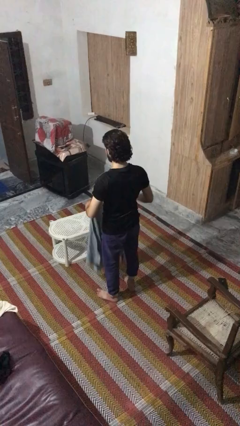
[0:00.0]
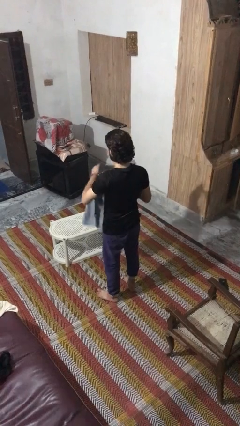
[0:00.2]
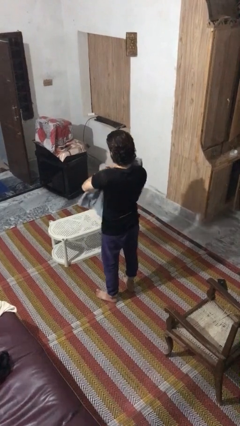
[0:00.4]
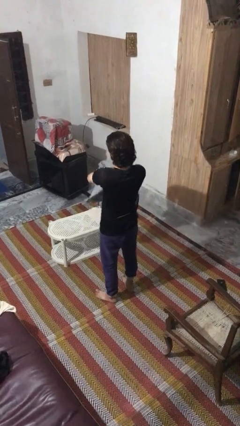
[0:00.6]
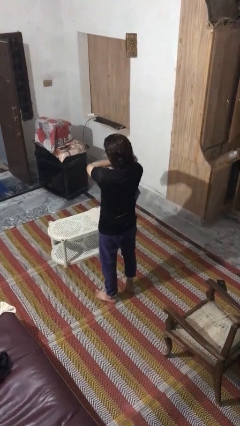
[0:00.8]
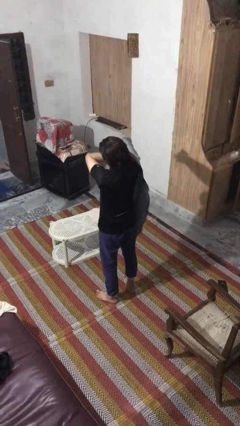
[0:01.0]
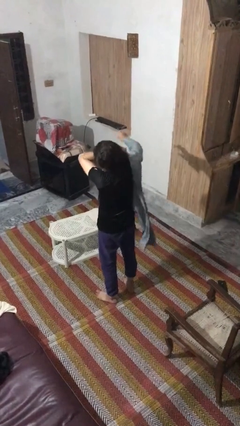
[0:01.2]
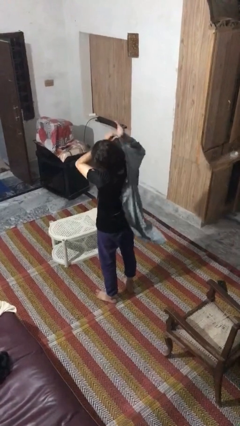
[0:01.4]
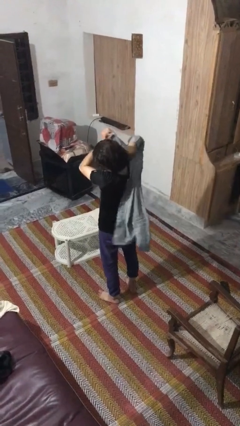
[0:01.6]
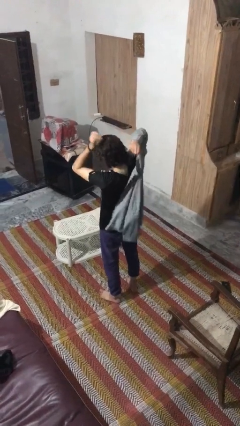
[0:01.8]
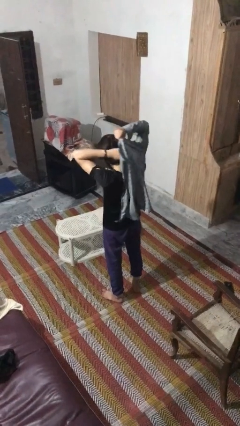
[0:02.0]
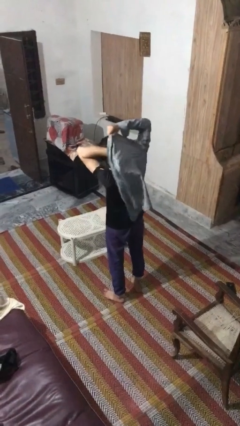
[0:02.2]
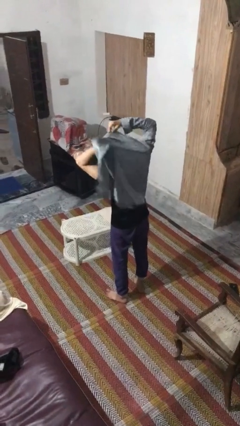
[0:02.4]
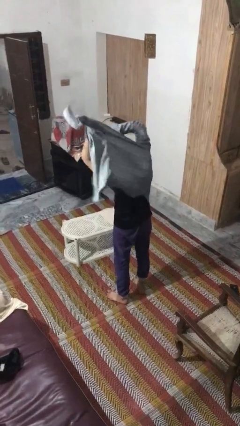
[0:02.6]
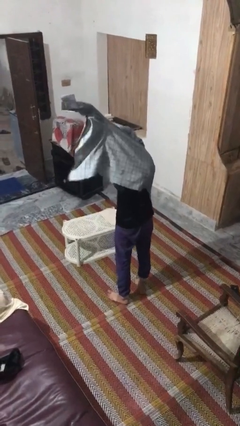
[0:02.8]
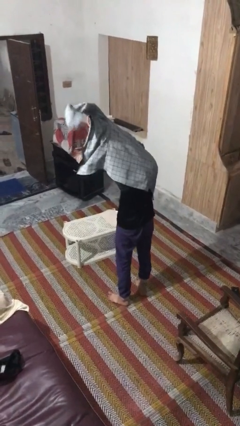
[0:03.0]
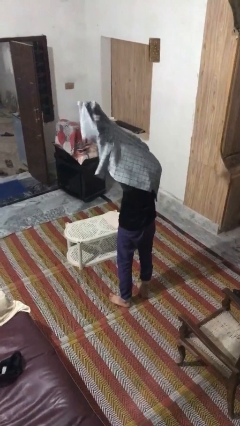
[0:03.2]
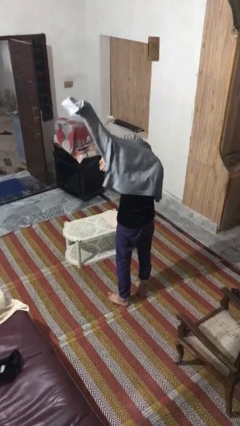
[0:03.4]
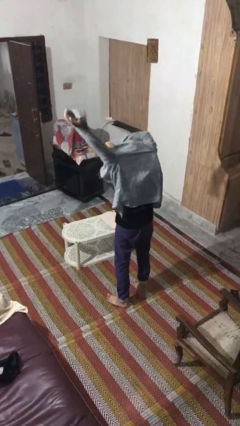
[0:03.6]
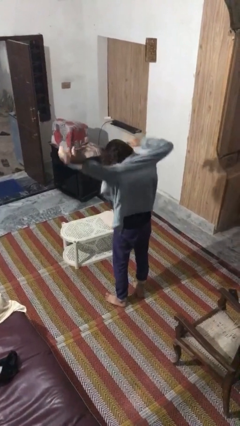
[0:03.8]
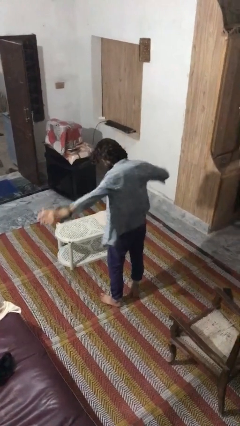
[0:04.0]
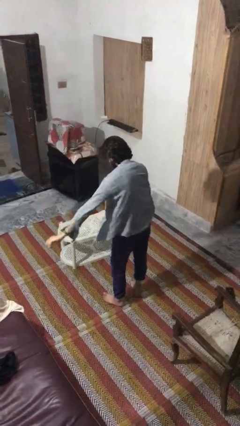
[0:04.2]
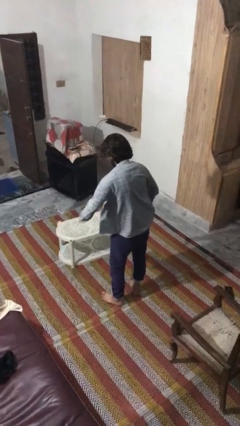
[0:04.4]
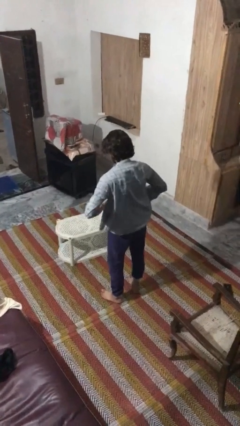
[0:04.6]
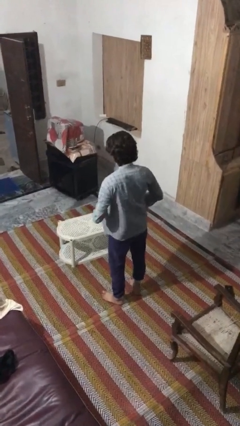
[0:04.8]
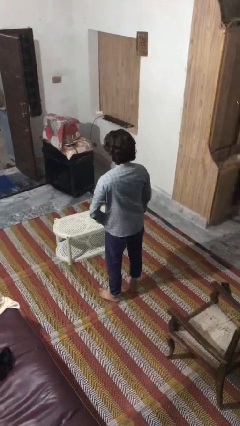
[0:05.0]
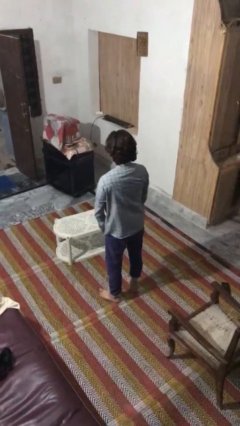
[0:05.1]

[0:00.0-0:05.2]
person puts on shirt

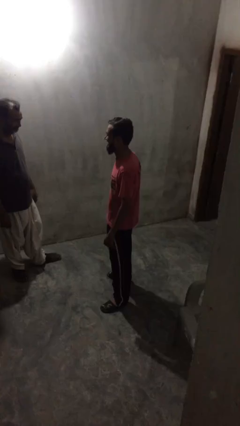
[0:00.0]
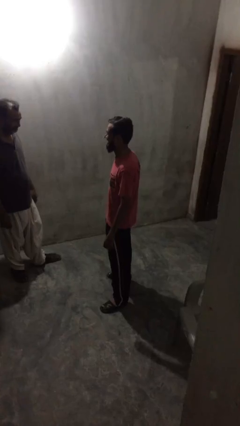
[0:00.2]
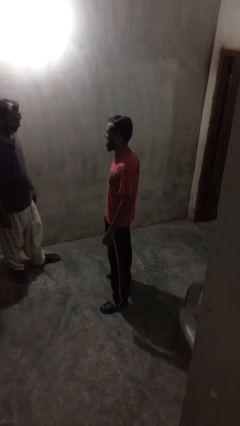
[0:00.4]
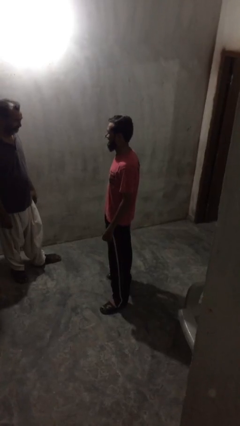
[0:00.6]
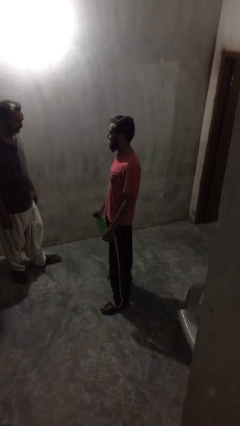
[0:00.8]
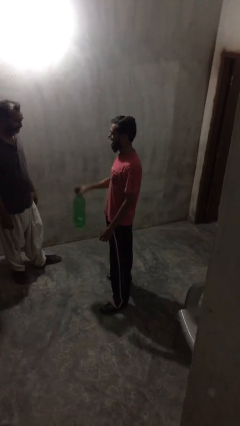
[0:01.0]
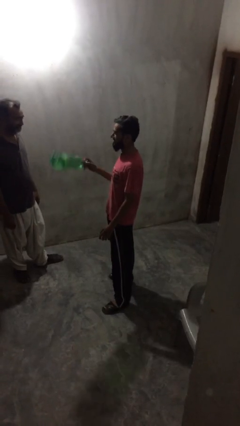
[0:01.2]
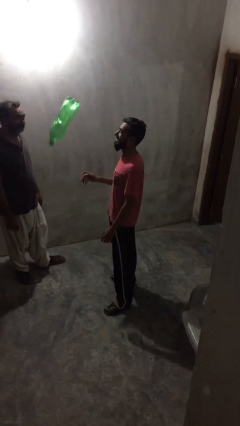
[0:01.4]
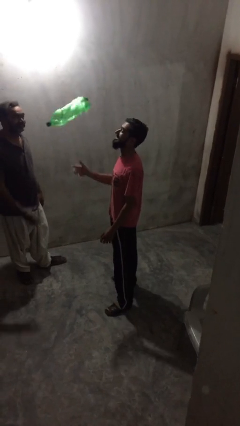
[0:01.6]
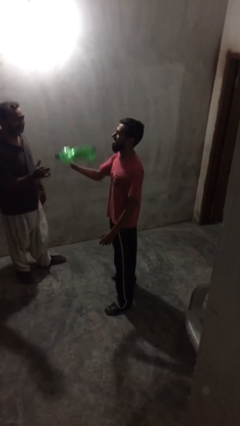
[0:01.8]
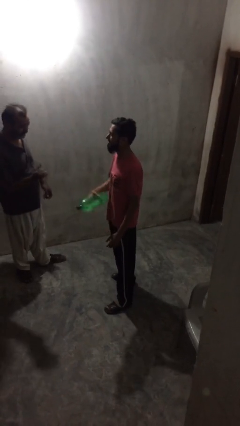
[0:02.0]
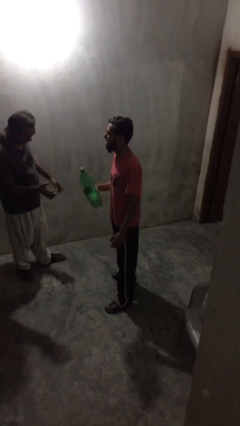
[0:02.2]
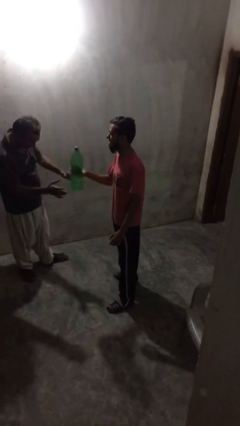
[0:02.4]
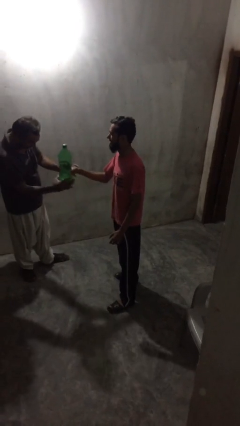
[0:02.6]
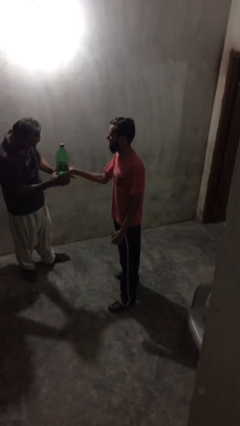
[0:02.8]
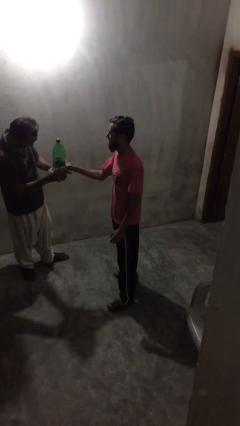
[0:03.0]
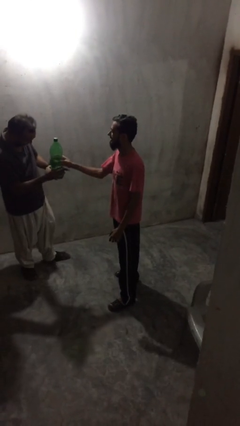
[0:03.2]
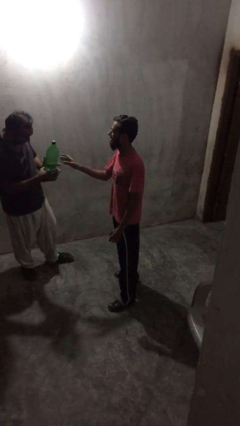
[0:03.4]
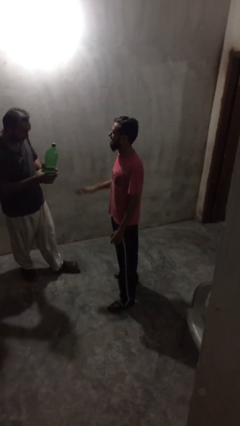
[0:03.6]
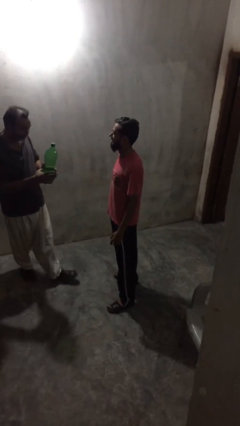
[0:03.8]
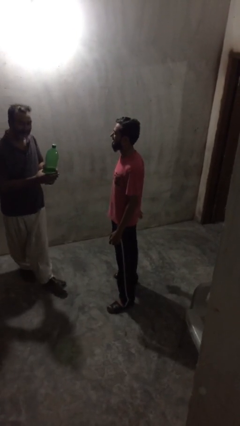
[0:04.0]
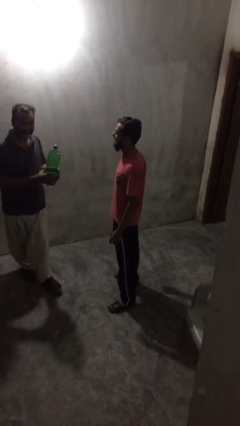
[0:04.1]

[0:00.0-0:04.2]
person transfers object to person

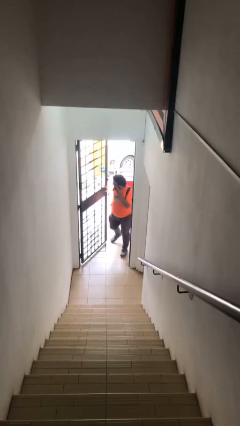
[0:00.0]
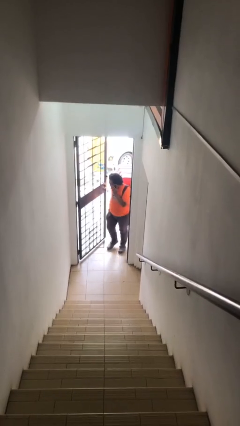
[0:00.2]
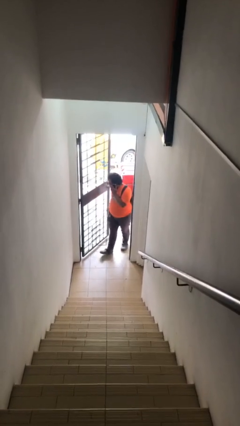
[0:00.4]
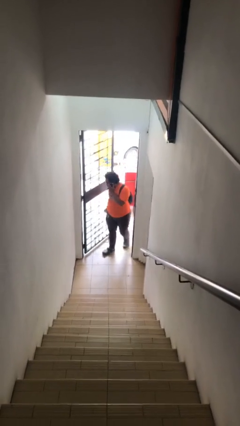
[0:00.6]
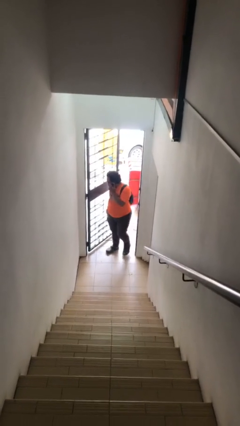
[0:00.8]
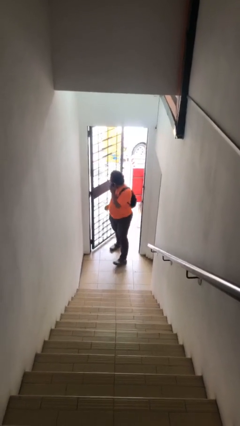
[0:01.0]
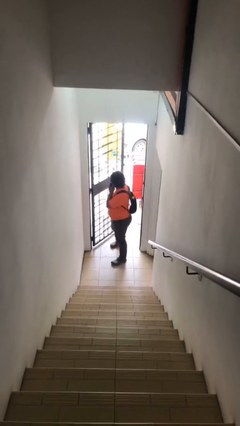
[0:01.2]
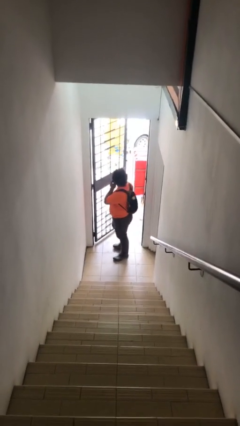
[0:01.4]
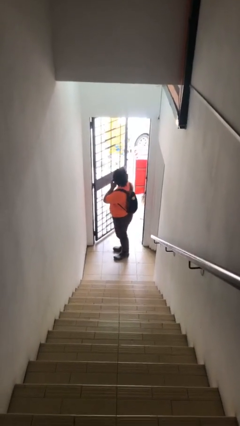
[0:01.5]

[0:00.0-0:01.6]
person enters scene through structure

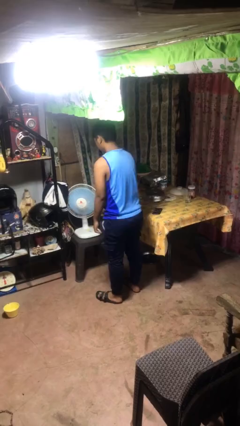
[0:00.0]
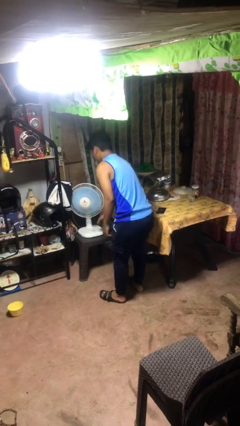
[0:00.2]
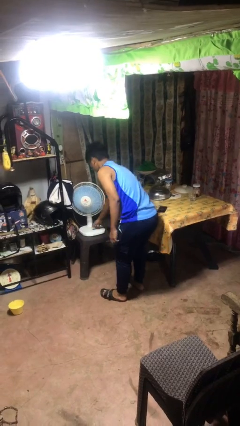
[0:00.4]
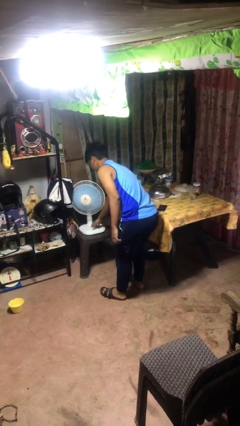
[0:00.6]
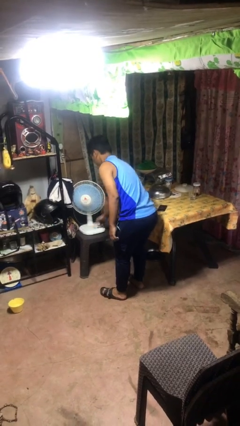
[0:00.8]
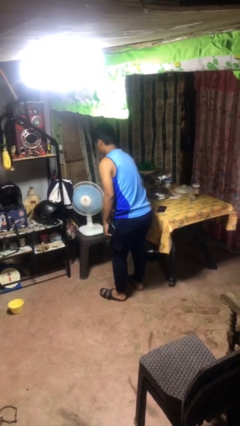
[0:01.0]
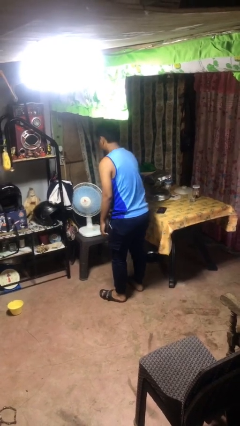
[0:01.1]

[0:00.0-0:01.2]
person turns off fan

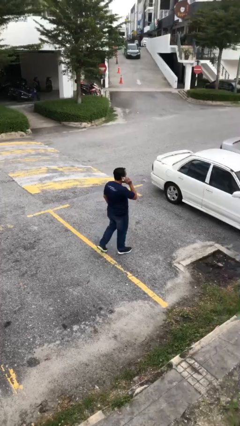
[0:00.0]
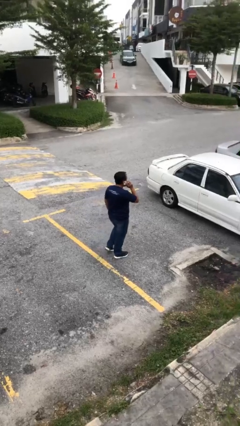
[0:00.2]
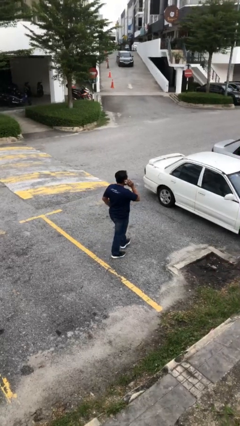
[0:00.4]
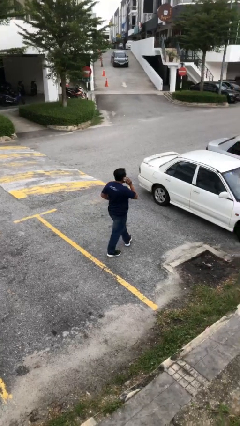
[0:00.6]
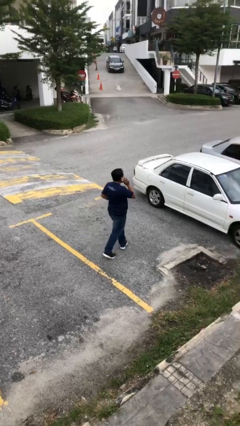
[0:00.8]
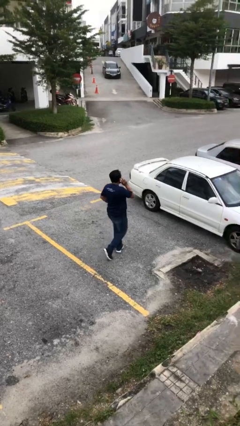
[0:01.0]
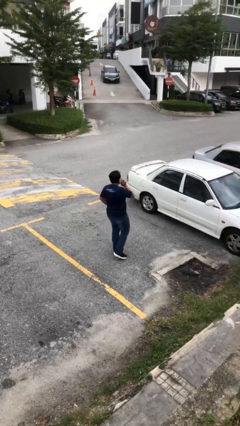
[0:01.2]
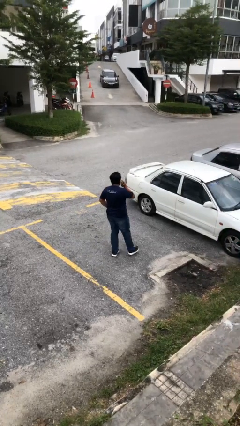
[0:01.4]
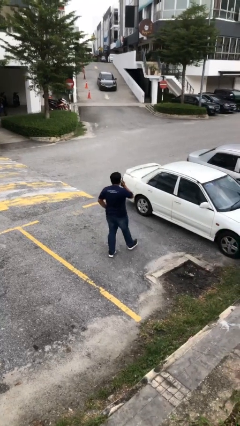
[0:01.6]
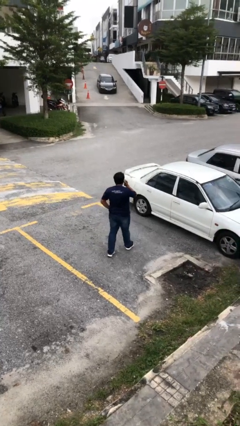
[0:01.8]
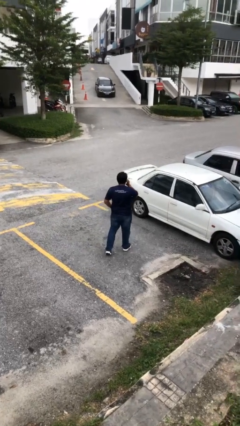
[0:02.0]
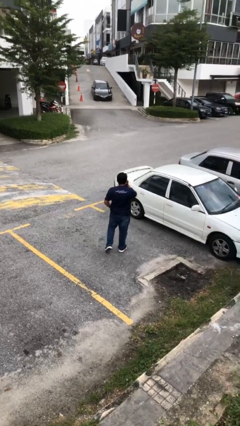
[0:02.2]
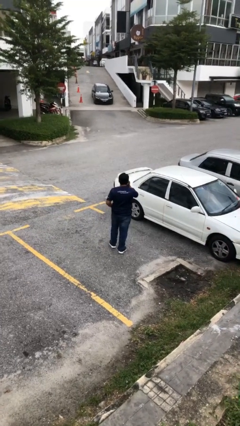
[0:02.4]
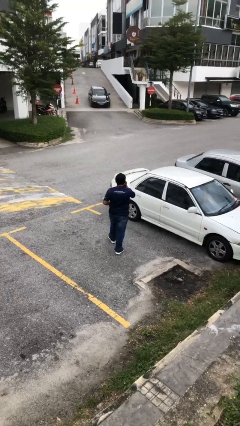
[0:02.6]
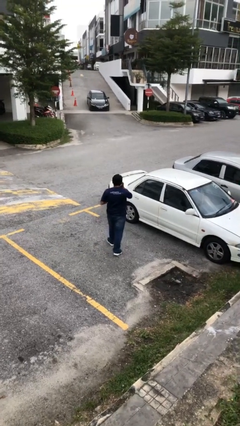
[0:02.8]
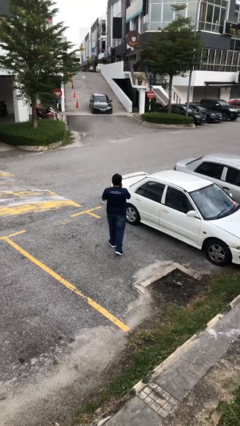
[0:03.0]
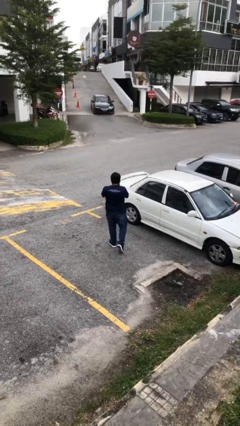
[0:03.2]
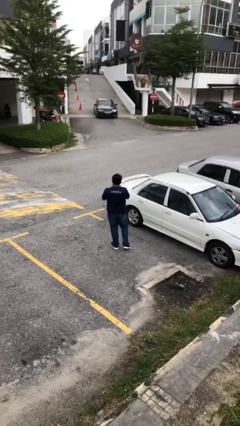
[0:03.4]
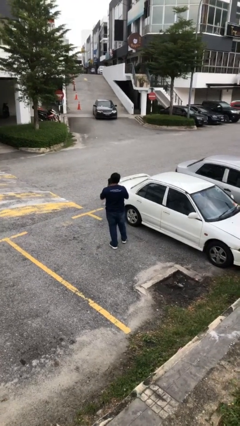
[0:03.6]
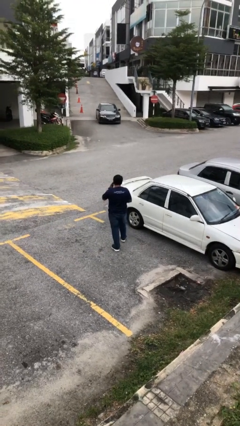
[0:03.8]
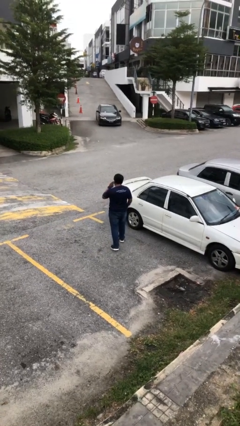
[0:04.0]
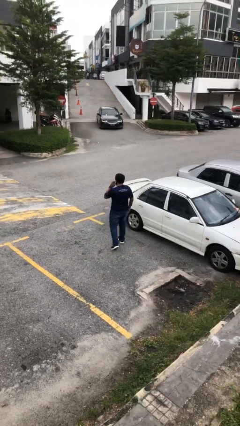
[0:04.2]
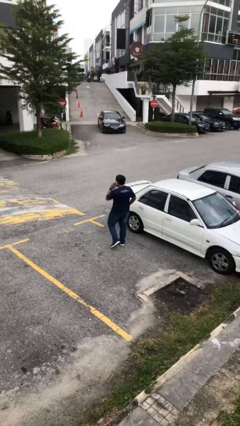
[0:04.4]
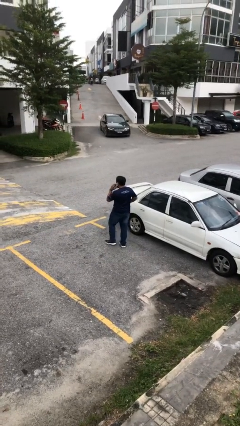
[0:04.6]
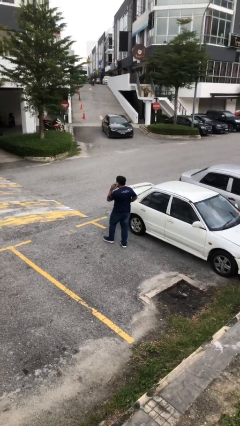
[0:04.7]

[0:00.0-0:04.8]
person talks on phone

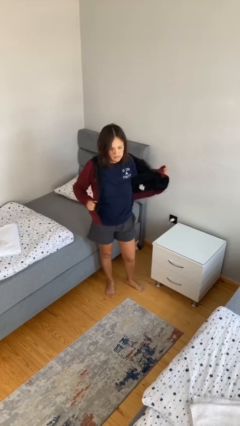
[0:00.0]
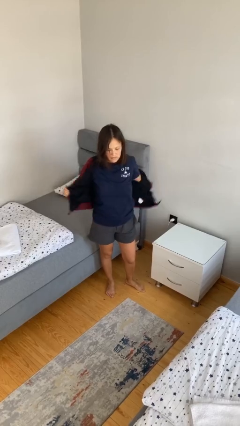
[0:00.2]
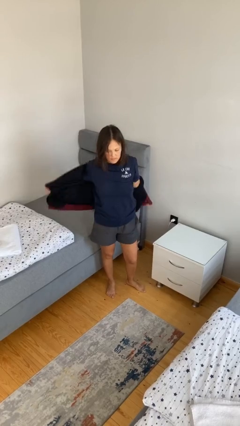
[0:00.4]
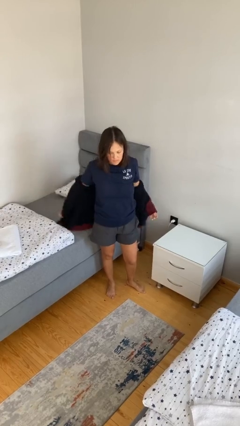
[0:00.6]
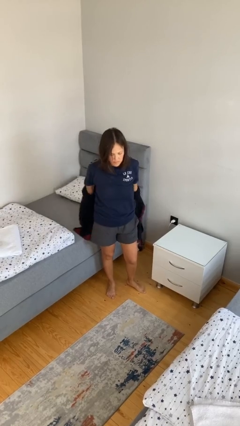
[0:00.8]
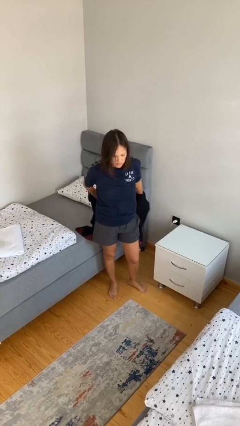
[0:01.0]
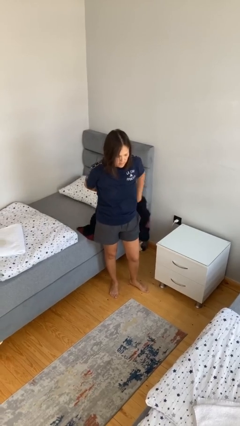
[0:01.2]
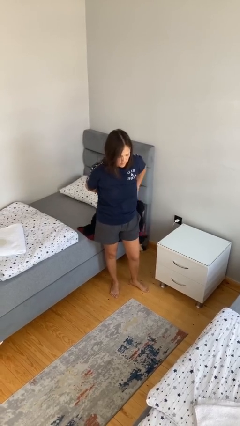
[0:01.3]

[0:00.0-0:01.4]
person takes off jacket
